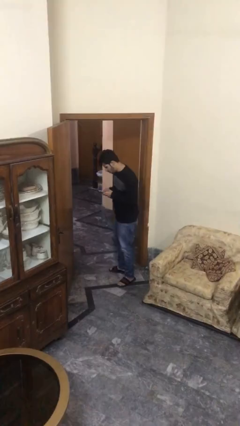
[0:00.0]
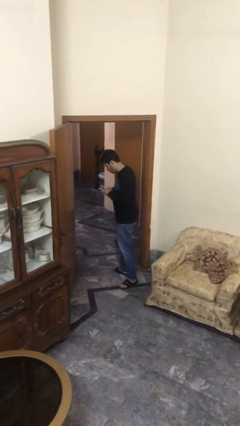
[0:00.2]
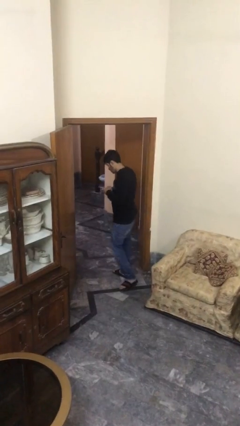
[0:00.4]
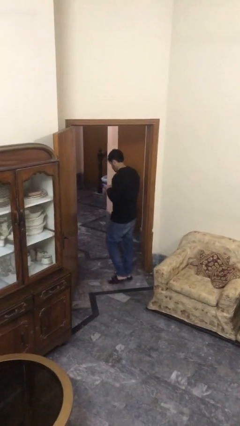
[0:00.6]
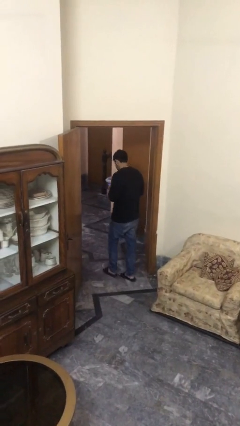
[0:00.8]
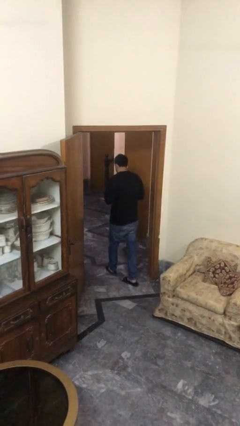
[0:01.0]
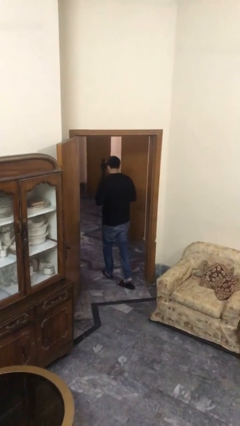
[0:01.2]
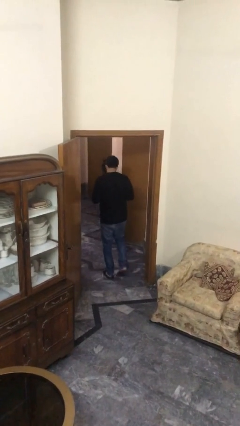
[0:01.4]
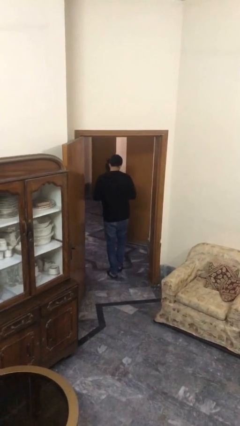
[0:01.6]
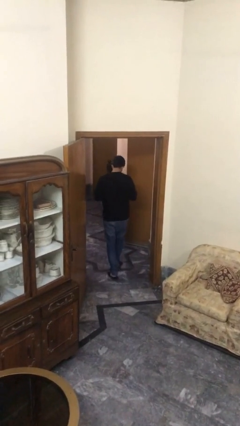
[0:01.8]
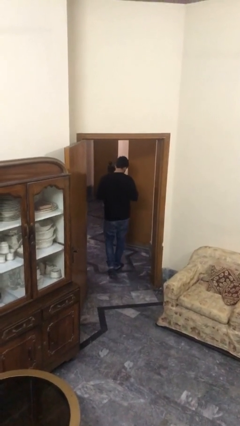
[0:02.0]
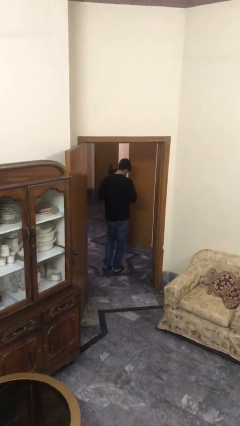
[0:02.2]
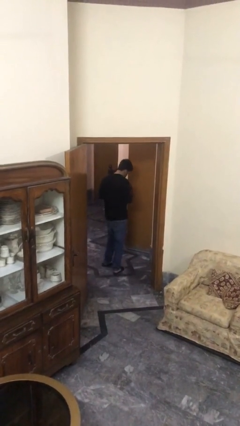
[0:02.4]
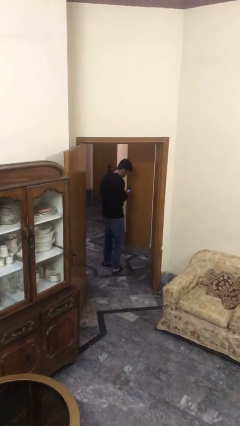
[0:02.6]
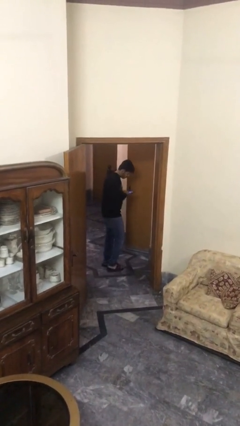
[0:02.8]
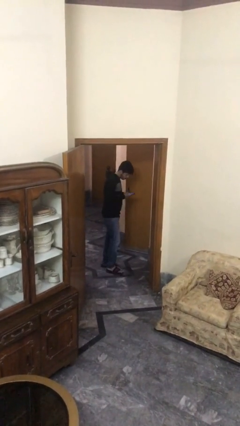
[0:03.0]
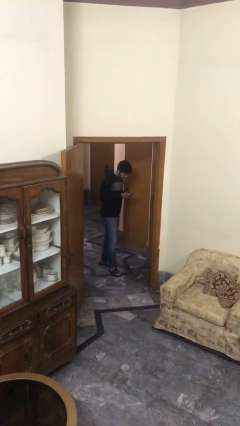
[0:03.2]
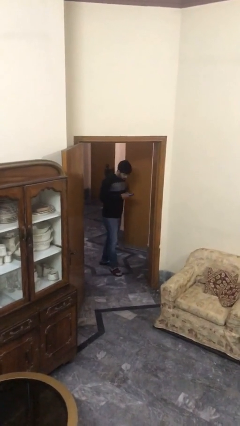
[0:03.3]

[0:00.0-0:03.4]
person exits scene through structure

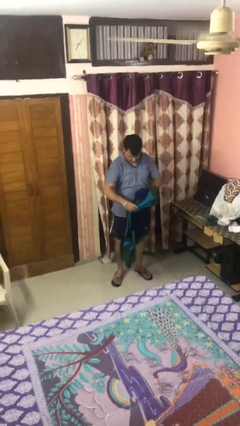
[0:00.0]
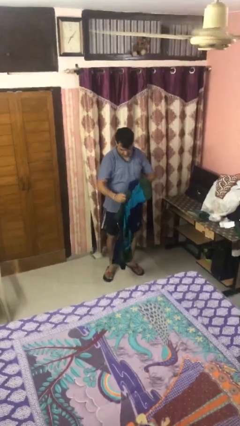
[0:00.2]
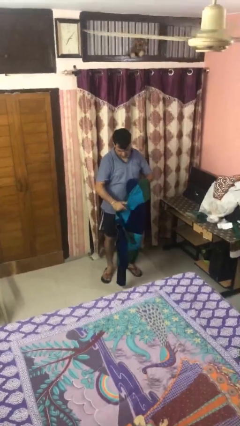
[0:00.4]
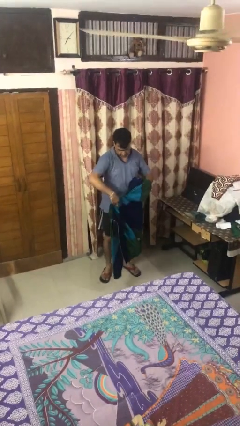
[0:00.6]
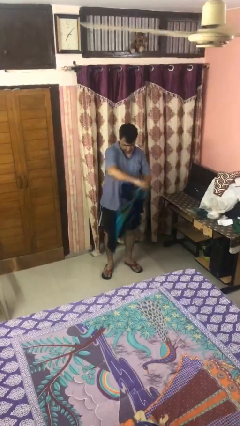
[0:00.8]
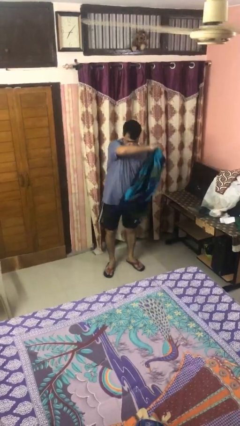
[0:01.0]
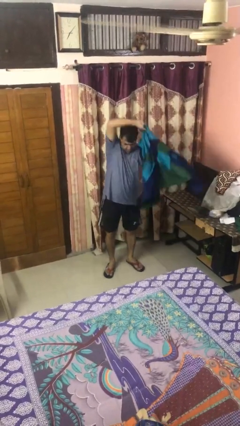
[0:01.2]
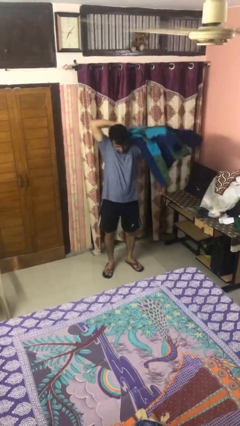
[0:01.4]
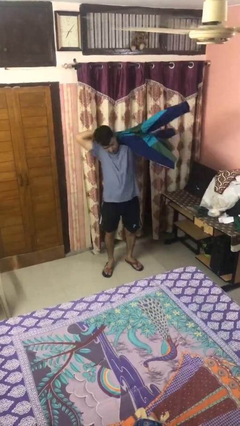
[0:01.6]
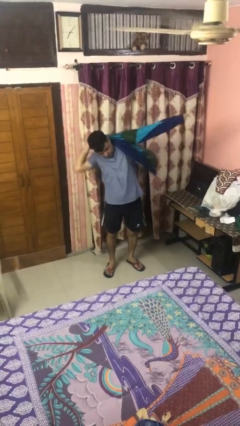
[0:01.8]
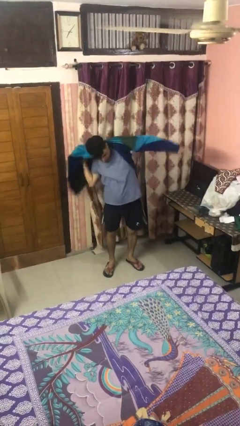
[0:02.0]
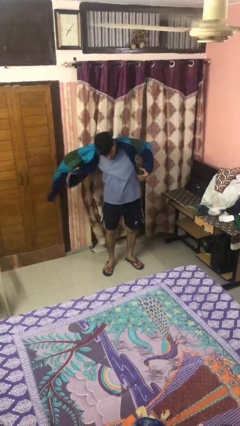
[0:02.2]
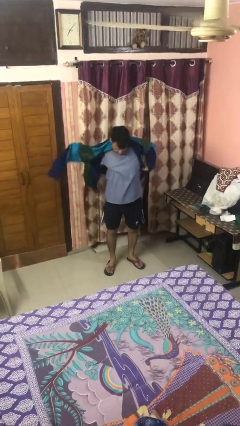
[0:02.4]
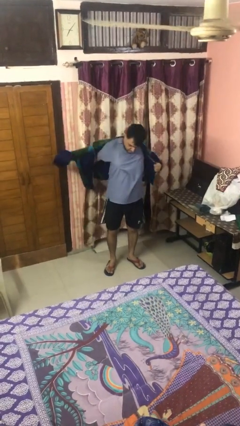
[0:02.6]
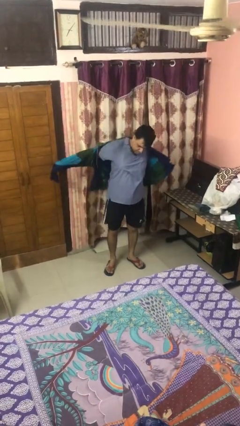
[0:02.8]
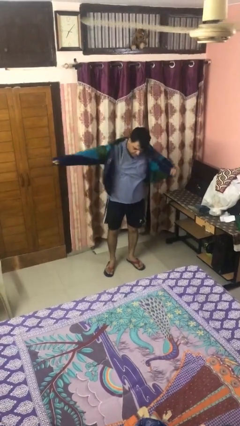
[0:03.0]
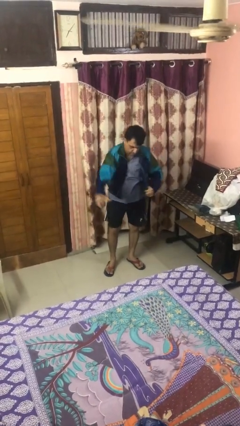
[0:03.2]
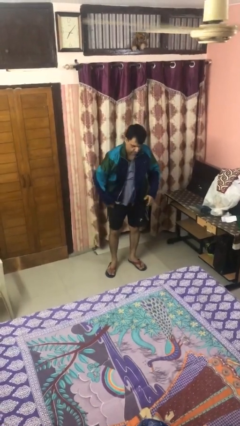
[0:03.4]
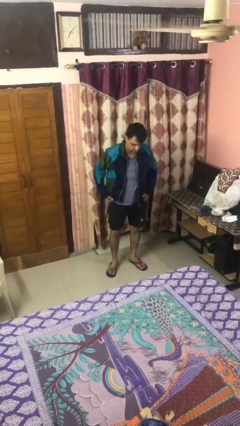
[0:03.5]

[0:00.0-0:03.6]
person puts on jacket

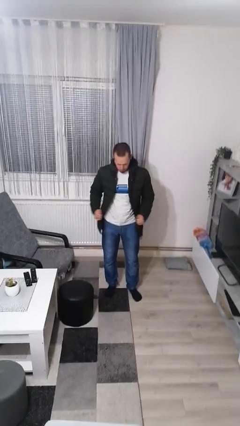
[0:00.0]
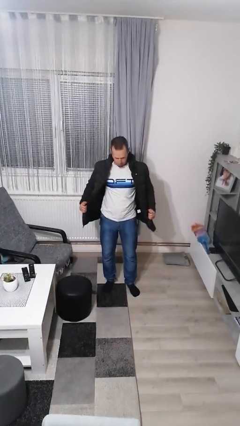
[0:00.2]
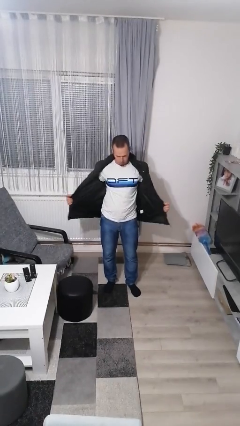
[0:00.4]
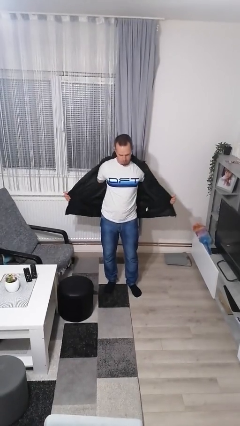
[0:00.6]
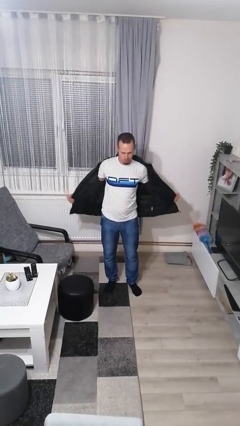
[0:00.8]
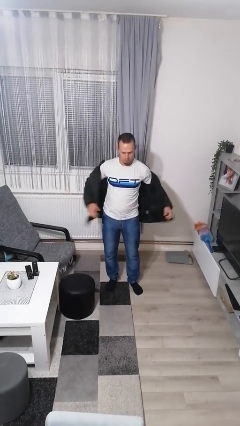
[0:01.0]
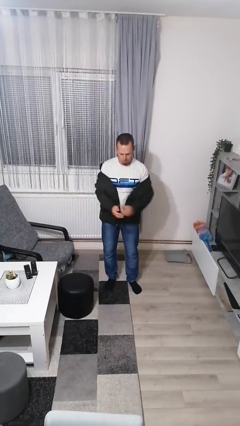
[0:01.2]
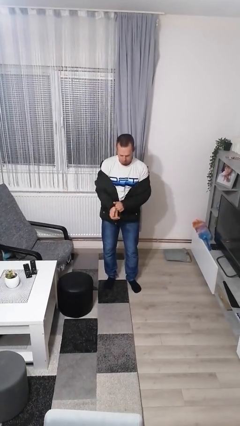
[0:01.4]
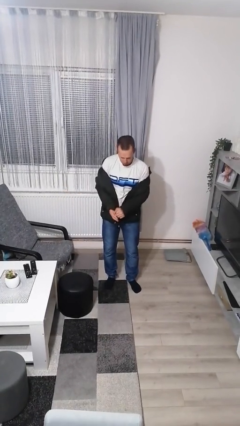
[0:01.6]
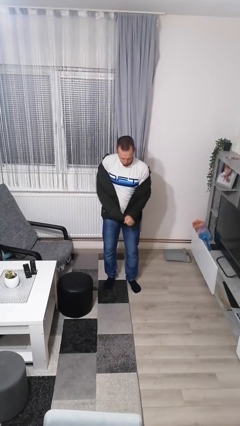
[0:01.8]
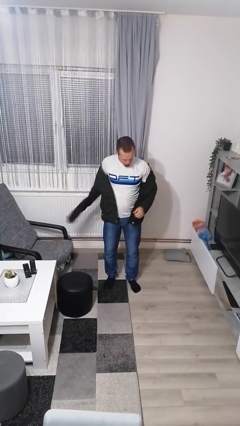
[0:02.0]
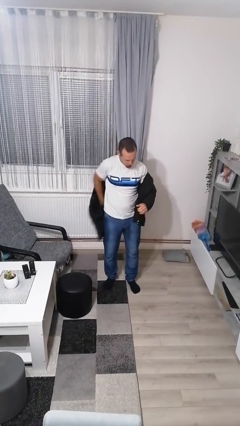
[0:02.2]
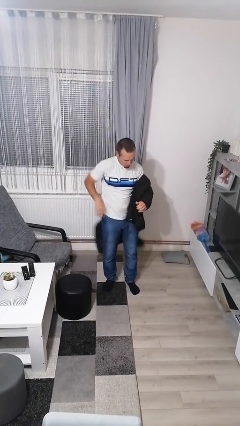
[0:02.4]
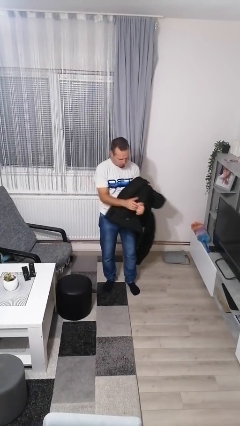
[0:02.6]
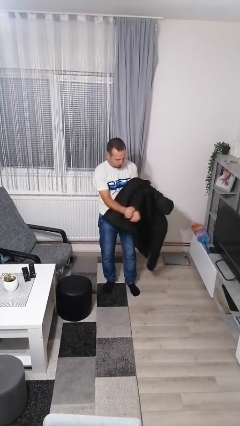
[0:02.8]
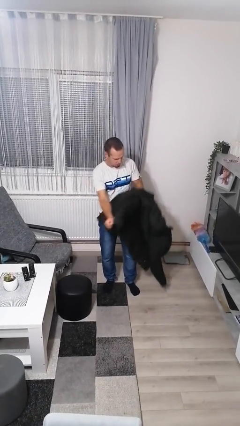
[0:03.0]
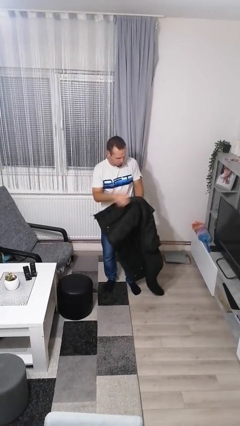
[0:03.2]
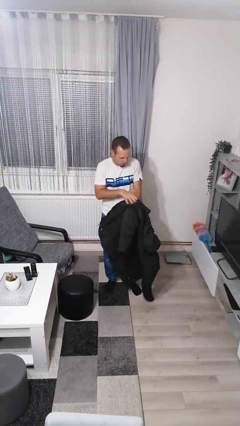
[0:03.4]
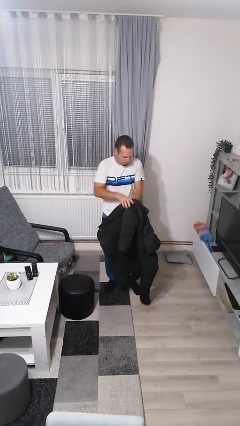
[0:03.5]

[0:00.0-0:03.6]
person takes off jacket

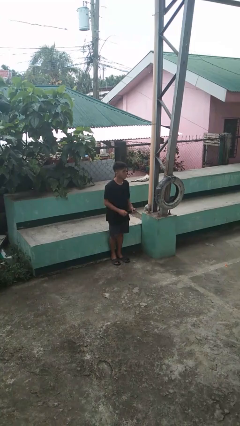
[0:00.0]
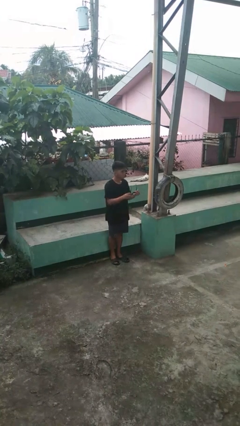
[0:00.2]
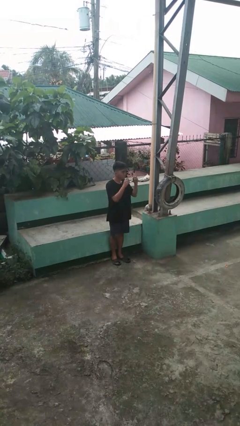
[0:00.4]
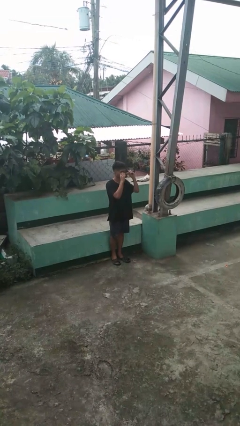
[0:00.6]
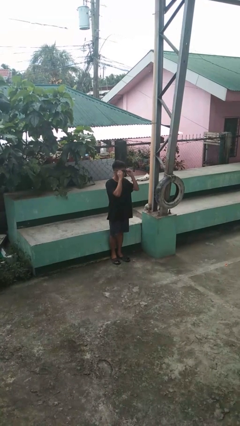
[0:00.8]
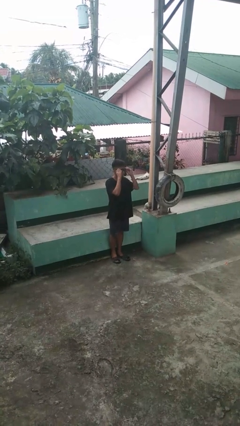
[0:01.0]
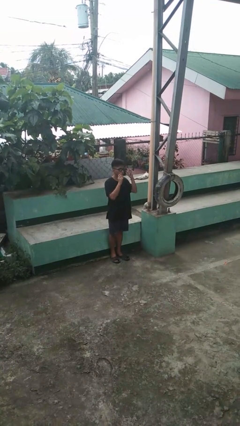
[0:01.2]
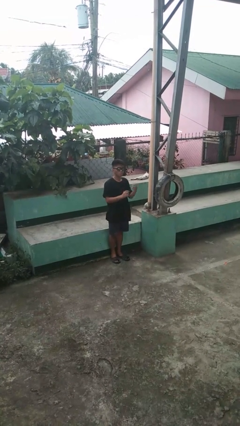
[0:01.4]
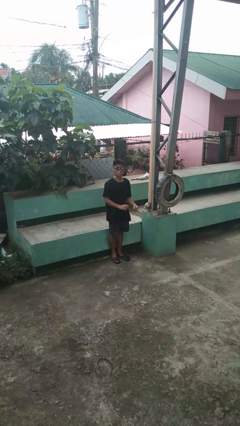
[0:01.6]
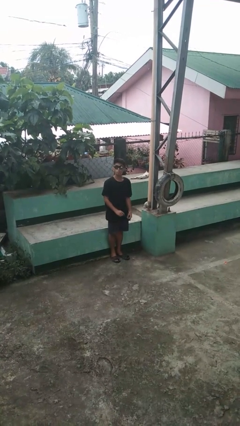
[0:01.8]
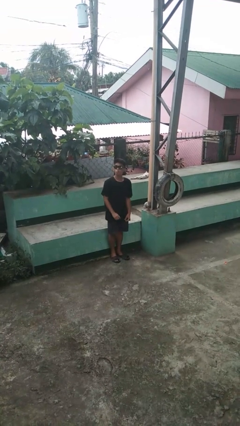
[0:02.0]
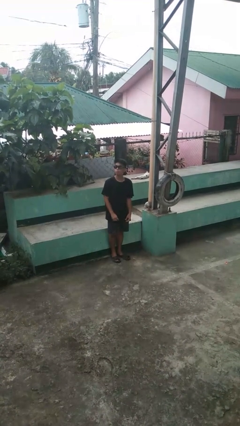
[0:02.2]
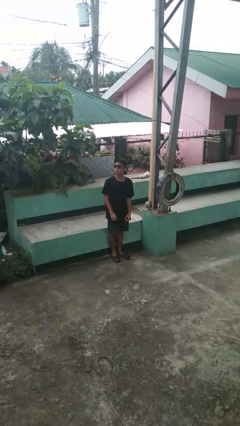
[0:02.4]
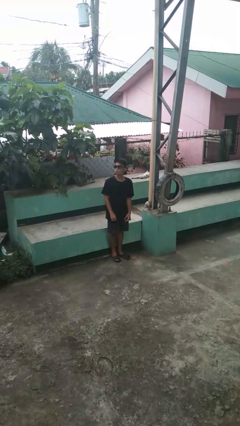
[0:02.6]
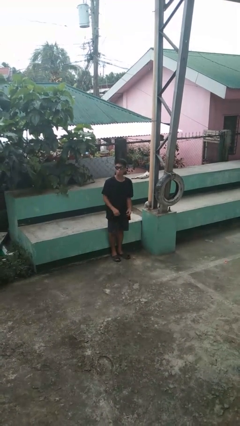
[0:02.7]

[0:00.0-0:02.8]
person puts on sunglasses

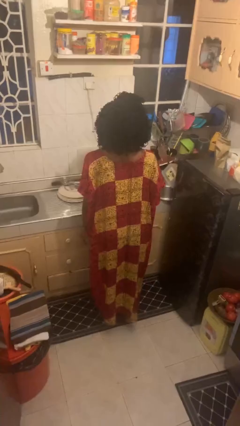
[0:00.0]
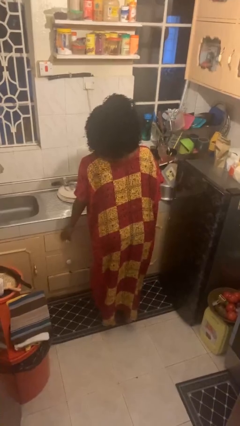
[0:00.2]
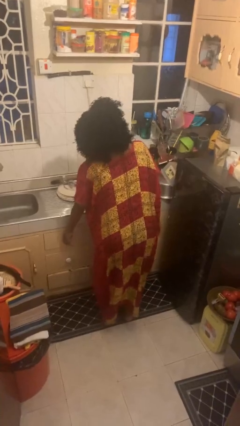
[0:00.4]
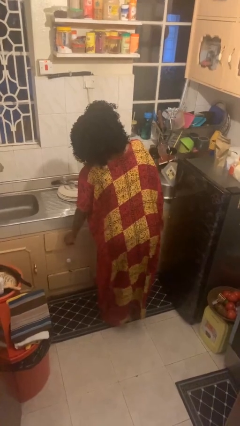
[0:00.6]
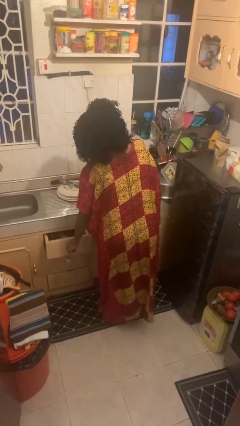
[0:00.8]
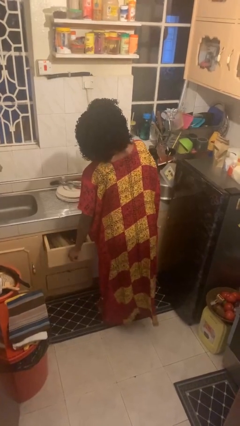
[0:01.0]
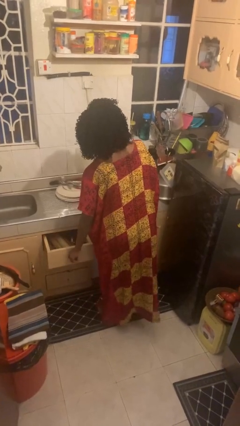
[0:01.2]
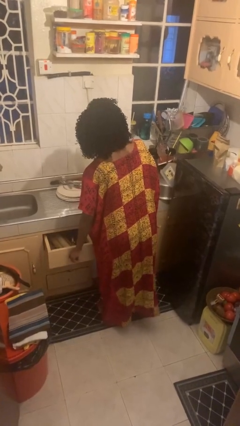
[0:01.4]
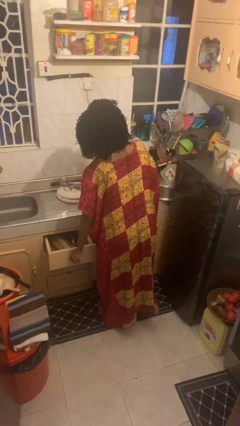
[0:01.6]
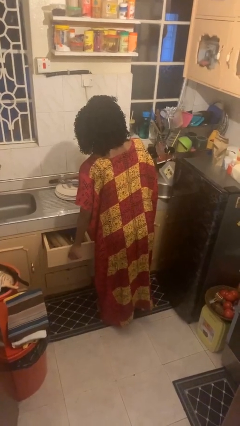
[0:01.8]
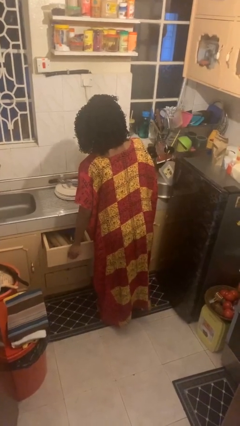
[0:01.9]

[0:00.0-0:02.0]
person opens kitchen drawer

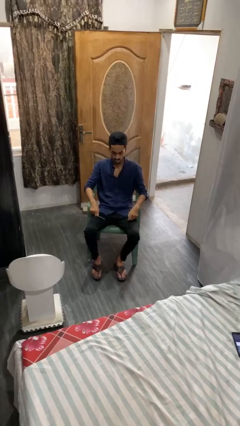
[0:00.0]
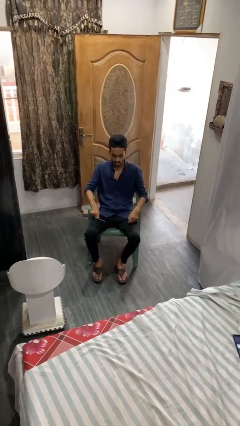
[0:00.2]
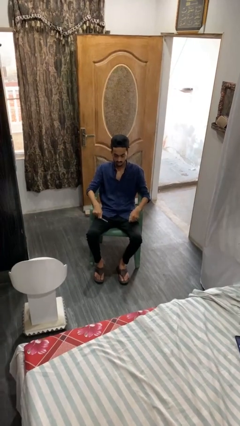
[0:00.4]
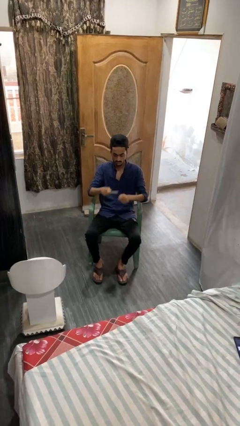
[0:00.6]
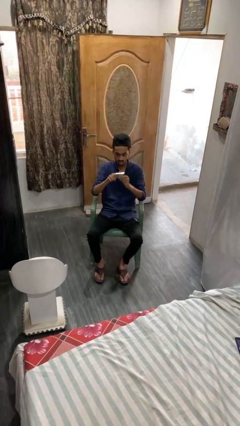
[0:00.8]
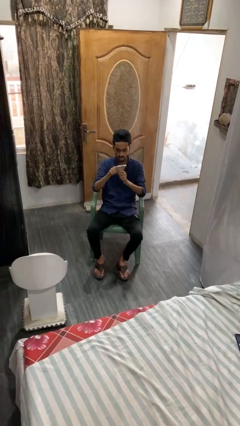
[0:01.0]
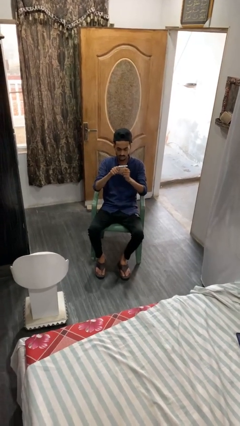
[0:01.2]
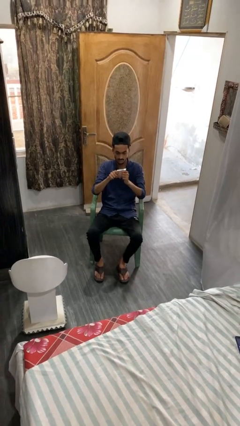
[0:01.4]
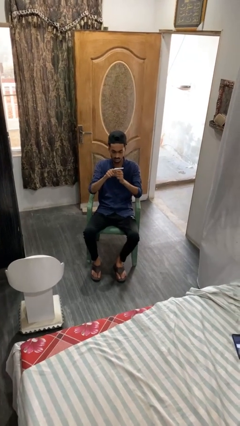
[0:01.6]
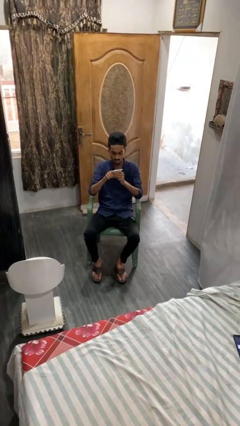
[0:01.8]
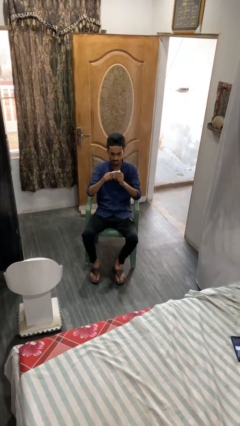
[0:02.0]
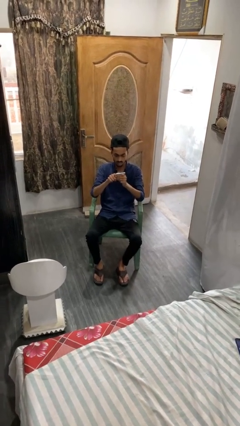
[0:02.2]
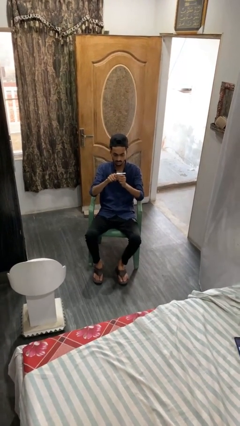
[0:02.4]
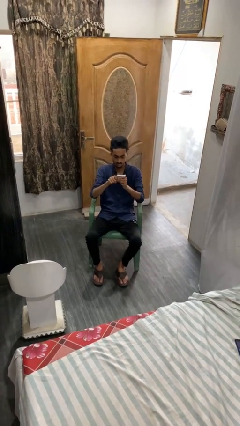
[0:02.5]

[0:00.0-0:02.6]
person files fingernails
